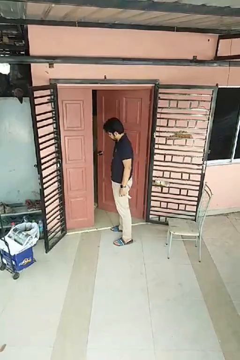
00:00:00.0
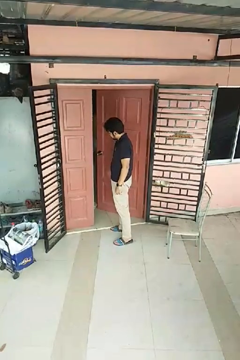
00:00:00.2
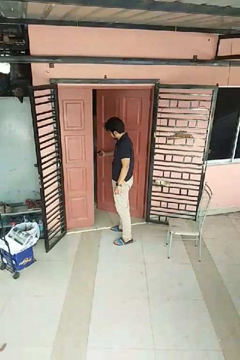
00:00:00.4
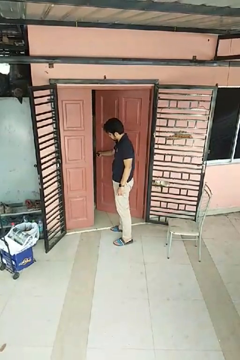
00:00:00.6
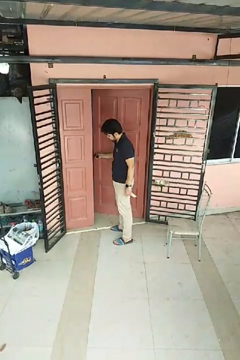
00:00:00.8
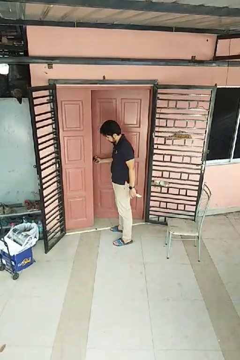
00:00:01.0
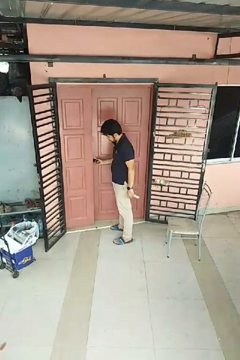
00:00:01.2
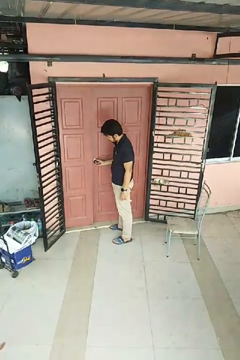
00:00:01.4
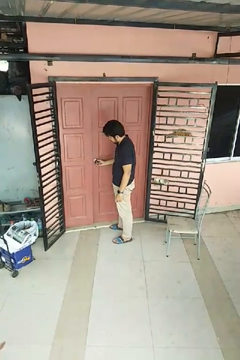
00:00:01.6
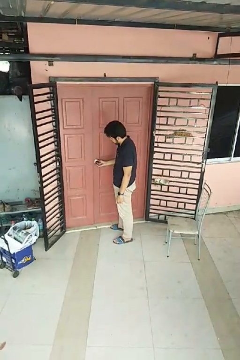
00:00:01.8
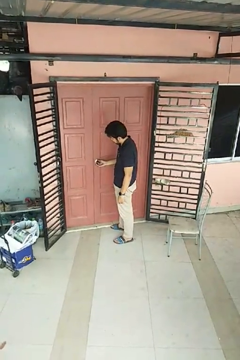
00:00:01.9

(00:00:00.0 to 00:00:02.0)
person closes facility door

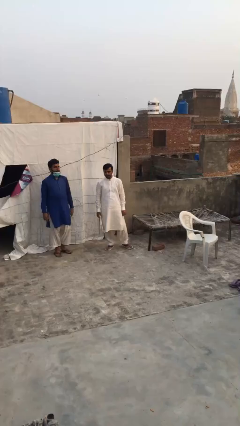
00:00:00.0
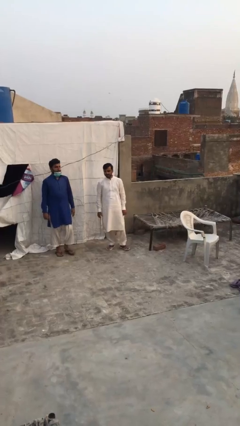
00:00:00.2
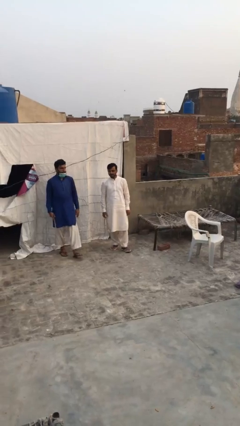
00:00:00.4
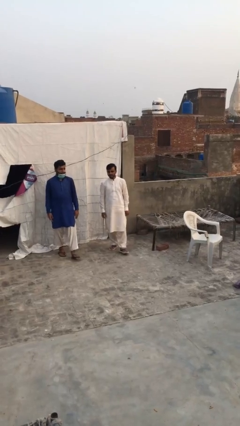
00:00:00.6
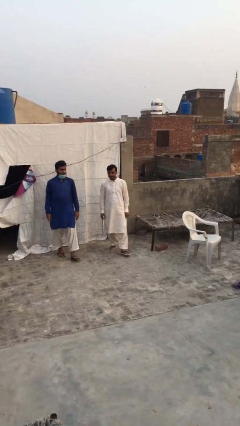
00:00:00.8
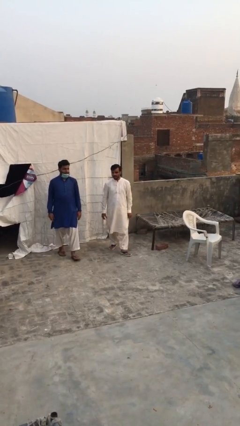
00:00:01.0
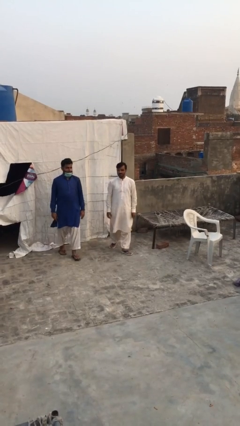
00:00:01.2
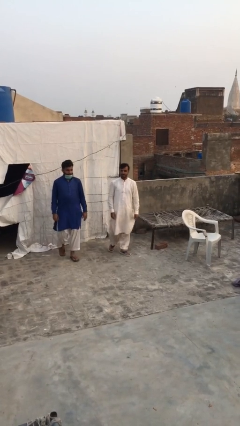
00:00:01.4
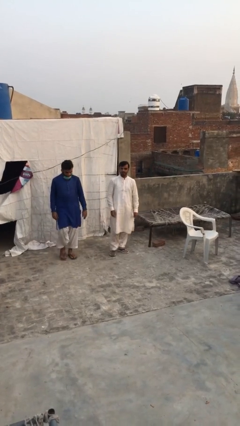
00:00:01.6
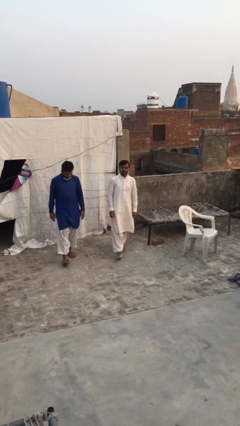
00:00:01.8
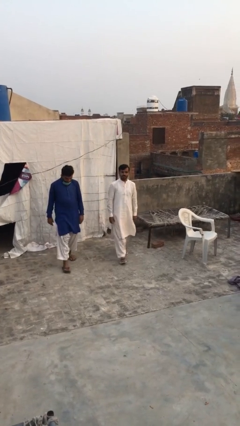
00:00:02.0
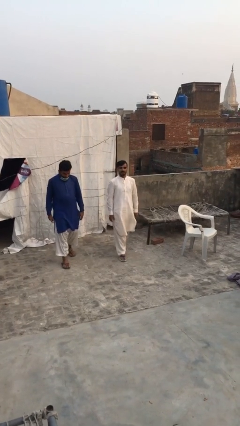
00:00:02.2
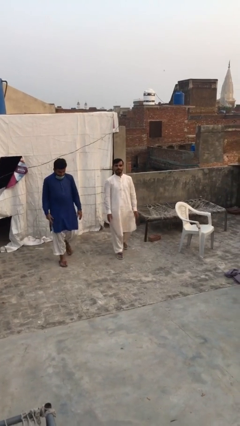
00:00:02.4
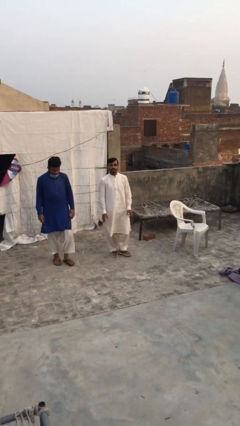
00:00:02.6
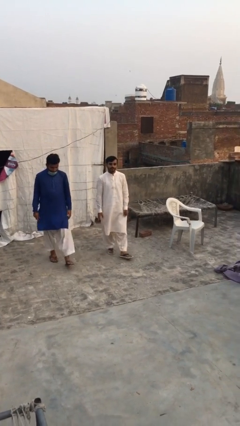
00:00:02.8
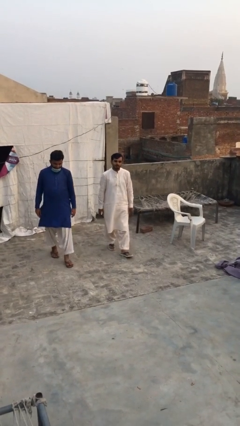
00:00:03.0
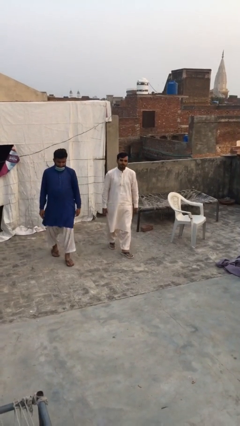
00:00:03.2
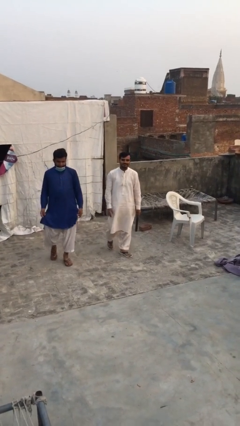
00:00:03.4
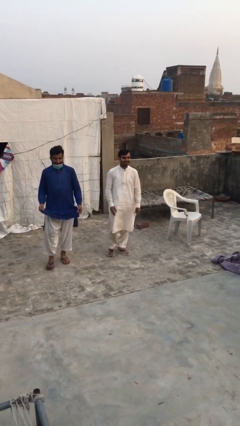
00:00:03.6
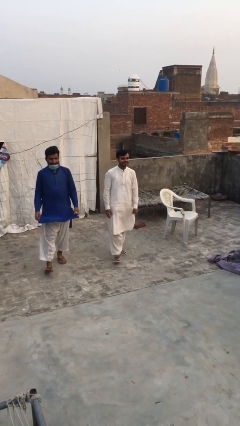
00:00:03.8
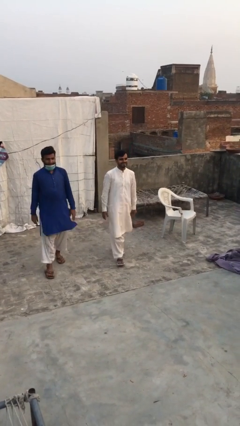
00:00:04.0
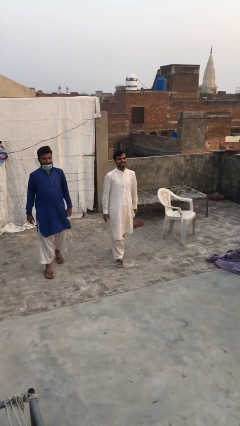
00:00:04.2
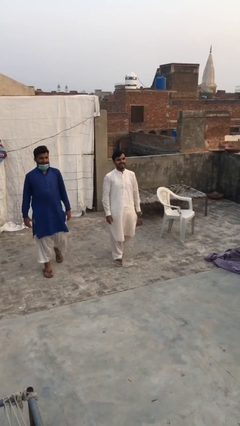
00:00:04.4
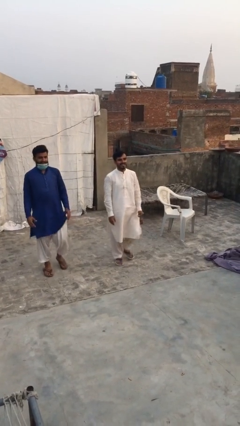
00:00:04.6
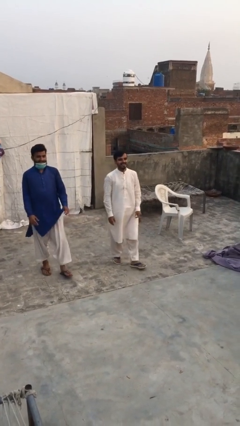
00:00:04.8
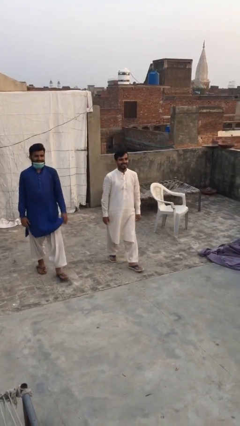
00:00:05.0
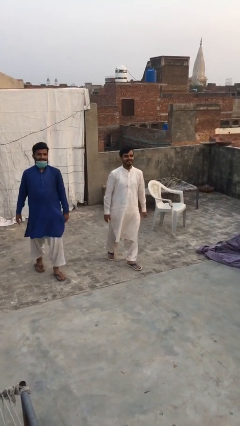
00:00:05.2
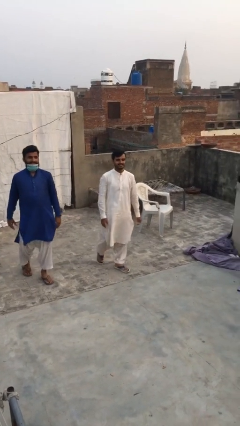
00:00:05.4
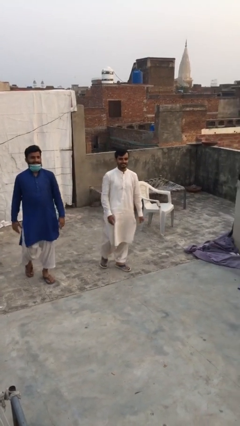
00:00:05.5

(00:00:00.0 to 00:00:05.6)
person talks to person

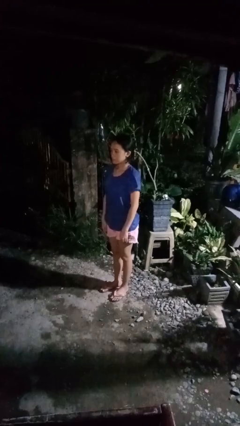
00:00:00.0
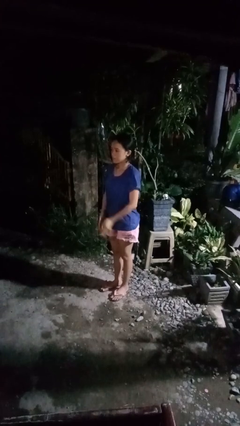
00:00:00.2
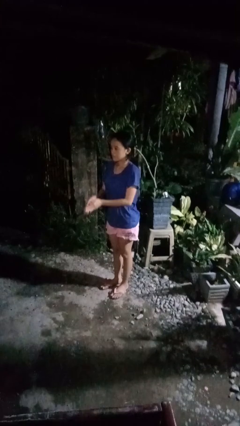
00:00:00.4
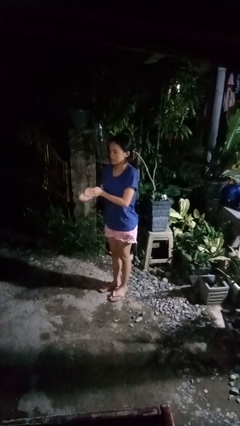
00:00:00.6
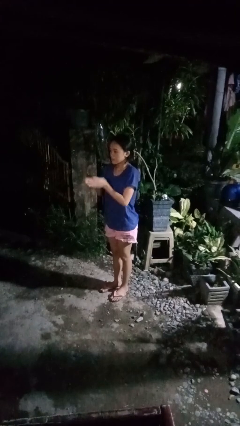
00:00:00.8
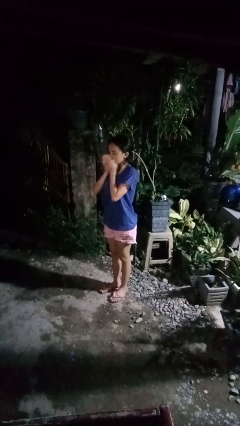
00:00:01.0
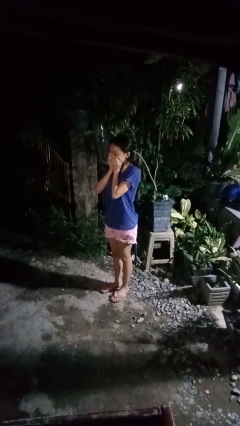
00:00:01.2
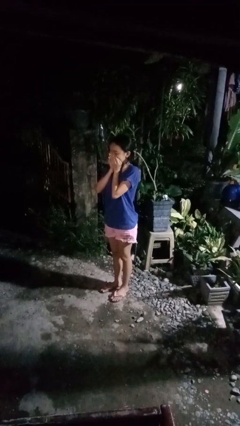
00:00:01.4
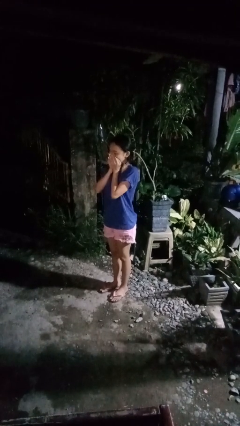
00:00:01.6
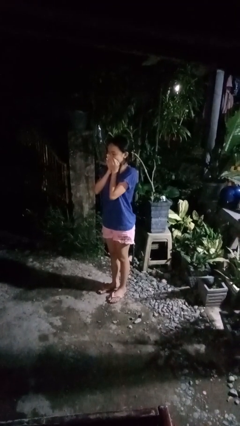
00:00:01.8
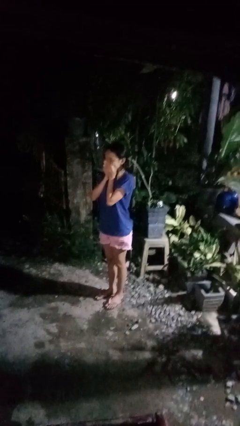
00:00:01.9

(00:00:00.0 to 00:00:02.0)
person blows into hands

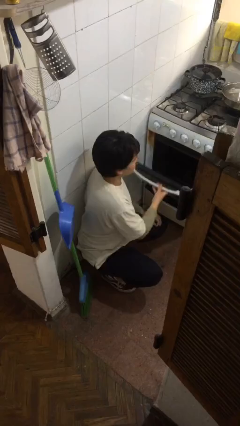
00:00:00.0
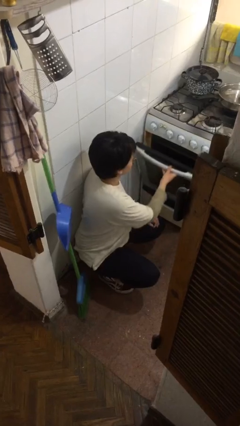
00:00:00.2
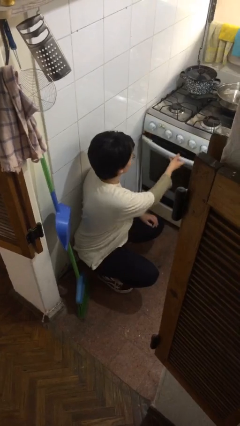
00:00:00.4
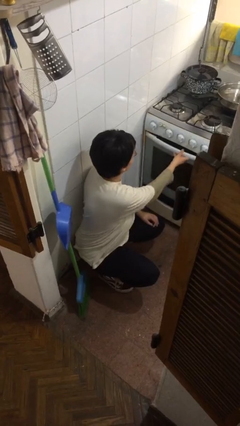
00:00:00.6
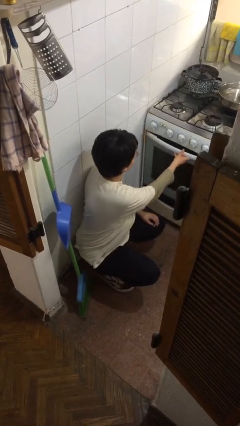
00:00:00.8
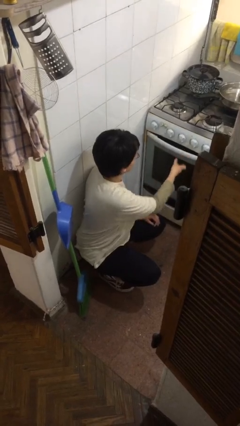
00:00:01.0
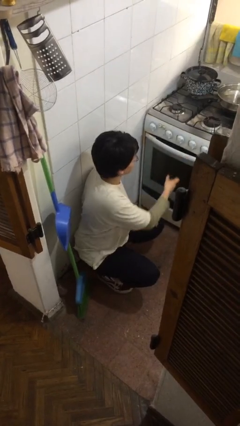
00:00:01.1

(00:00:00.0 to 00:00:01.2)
person closes oven door

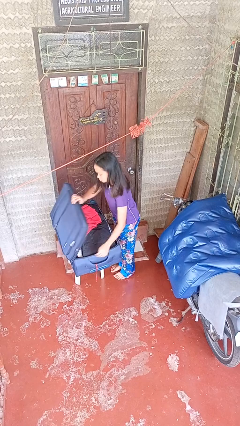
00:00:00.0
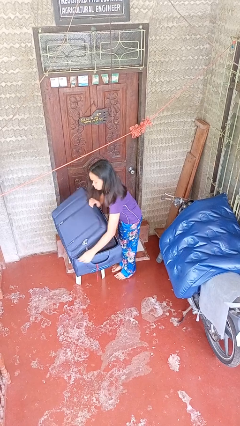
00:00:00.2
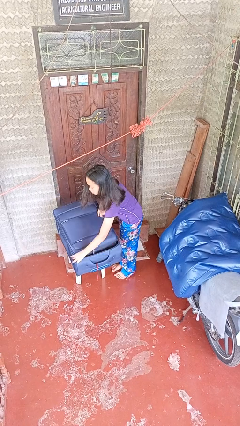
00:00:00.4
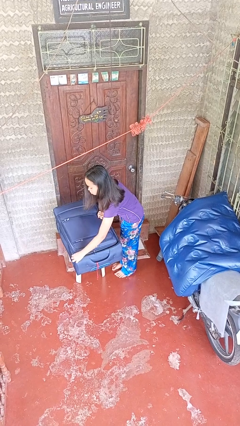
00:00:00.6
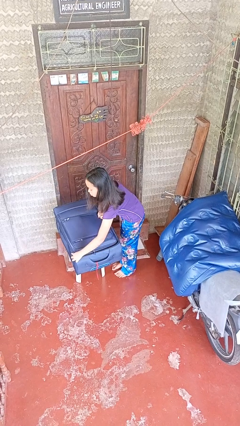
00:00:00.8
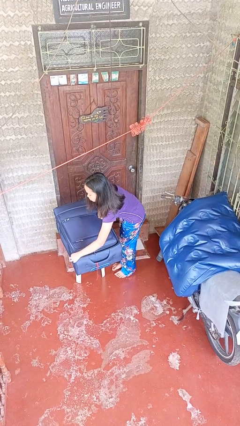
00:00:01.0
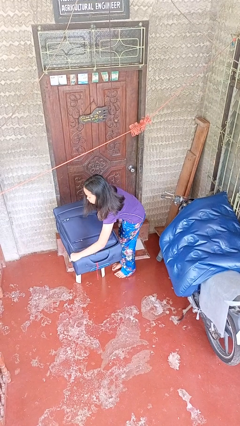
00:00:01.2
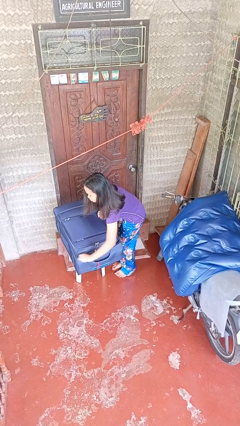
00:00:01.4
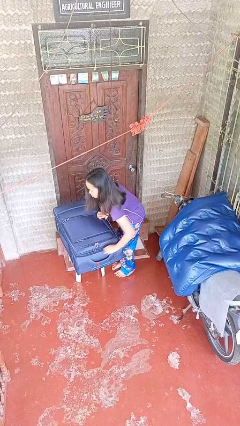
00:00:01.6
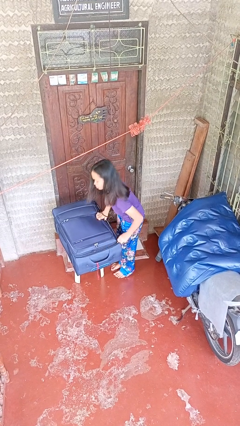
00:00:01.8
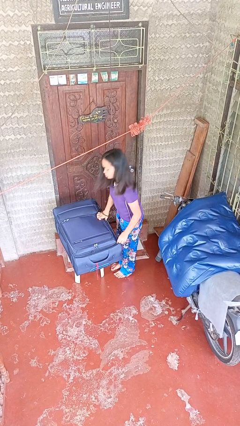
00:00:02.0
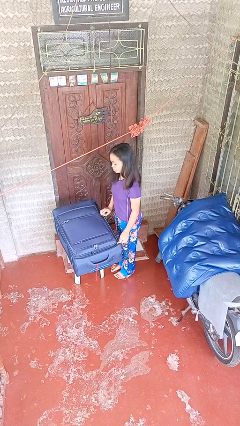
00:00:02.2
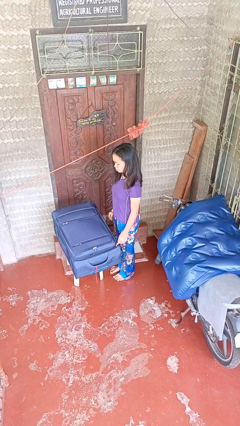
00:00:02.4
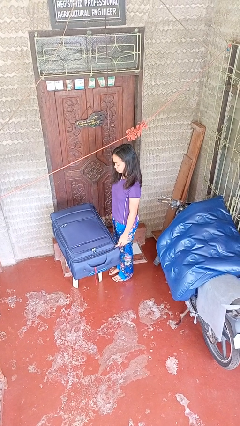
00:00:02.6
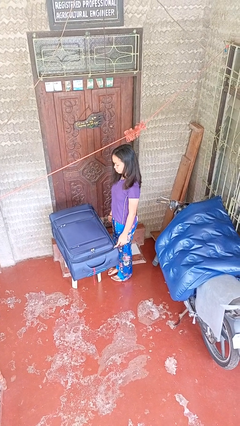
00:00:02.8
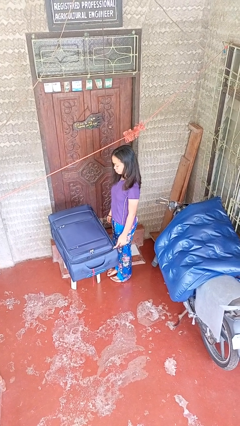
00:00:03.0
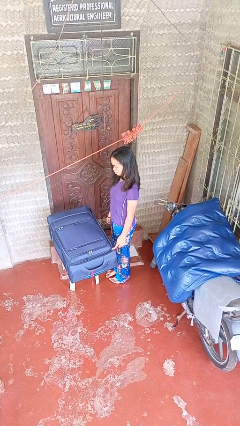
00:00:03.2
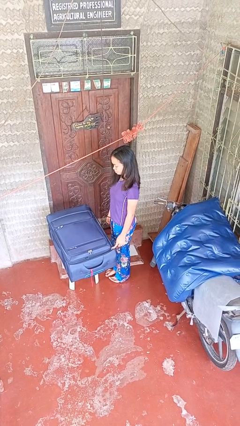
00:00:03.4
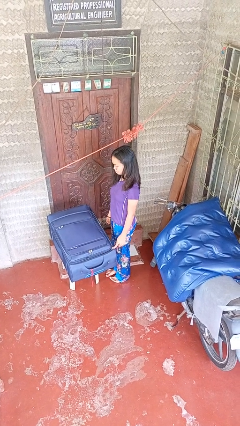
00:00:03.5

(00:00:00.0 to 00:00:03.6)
person closes suitcase

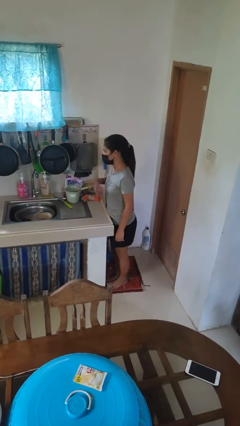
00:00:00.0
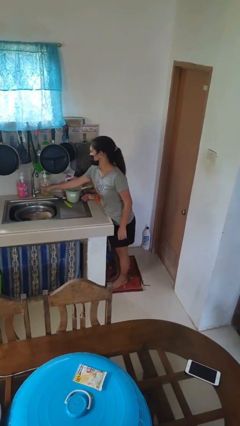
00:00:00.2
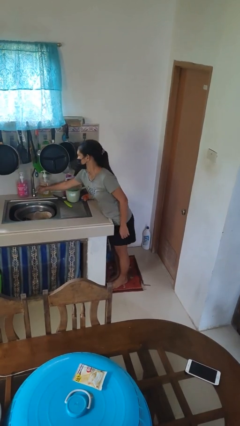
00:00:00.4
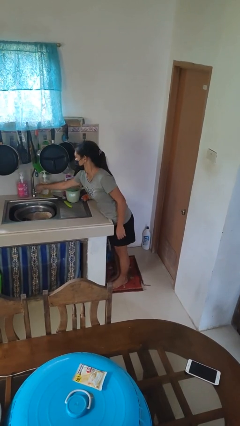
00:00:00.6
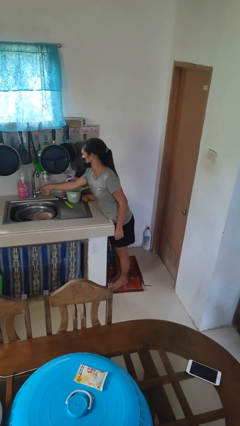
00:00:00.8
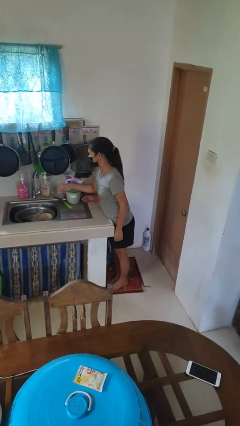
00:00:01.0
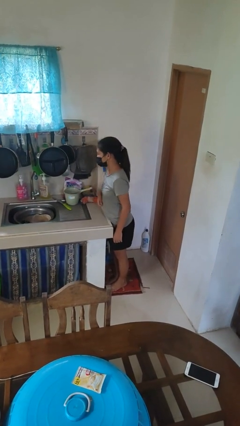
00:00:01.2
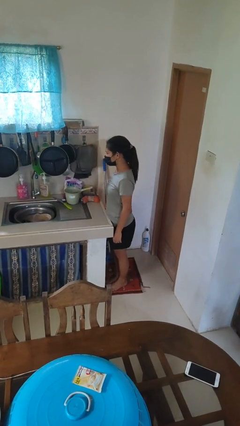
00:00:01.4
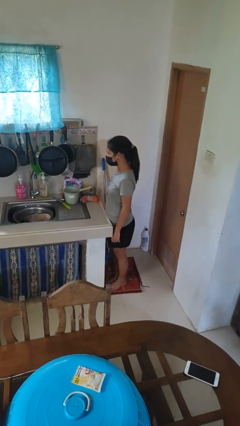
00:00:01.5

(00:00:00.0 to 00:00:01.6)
person turns off faucet

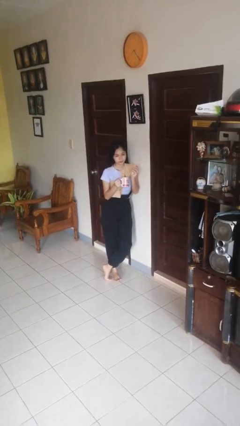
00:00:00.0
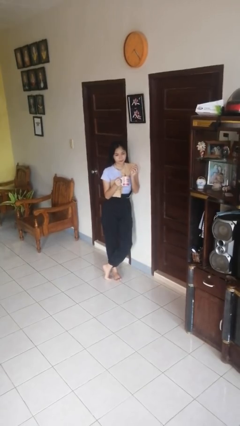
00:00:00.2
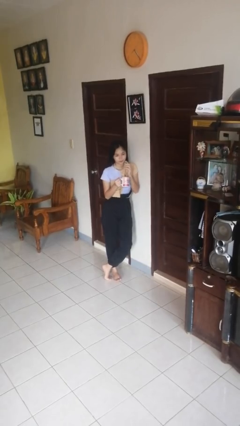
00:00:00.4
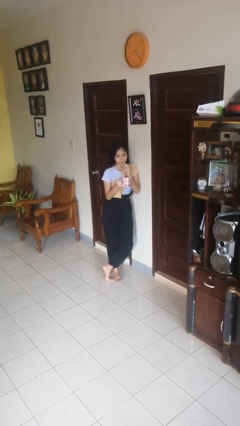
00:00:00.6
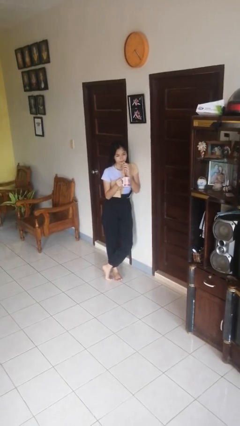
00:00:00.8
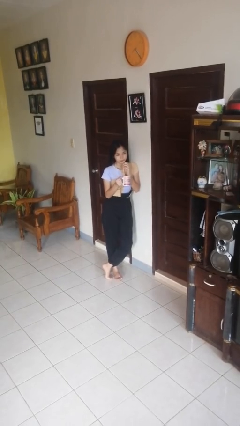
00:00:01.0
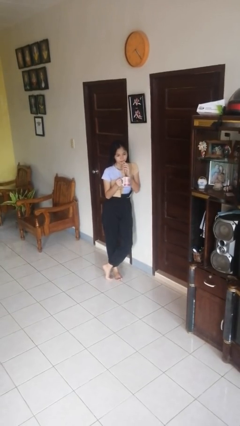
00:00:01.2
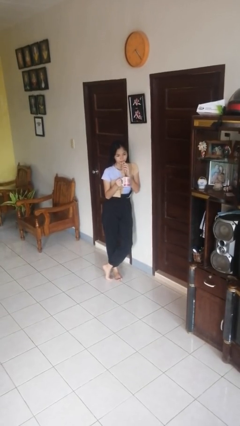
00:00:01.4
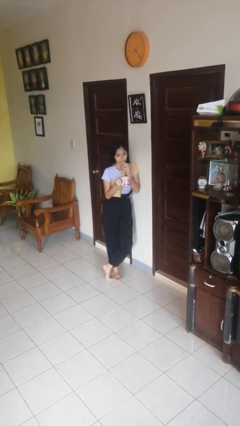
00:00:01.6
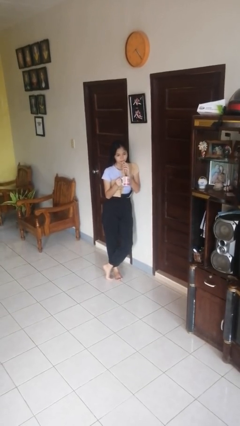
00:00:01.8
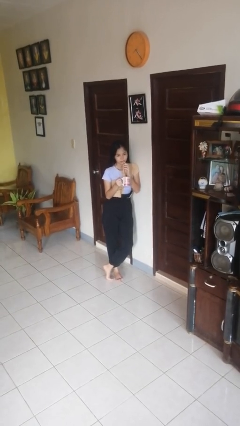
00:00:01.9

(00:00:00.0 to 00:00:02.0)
person drinks from straw
